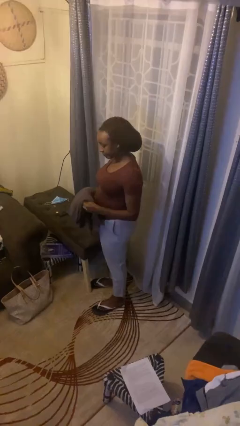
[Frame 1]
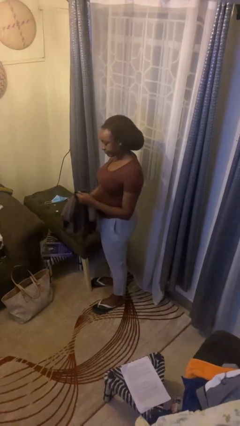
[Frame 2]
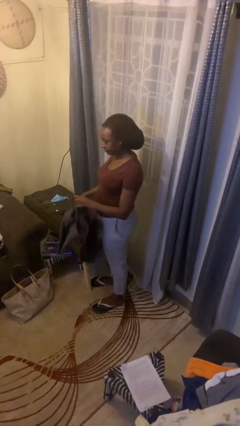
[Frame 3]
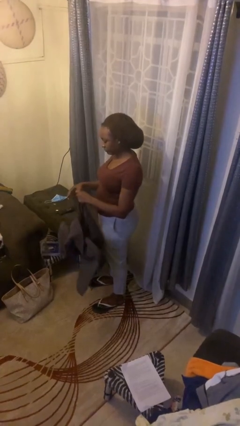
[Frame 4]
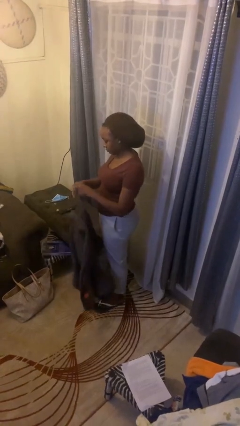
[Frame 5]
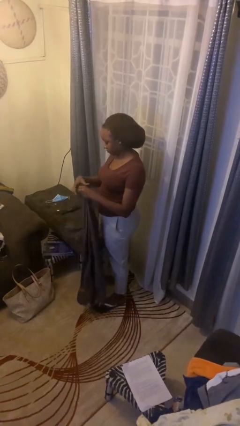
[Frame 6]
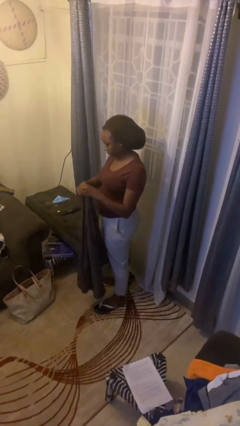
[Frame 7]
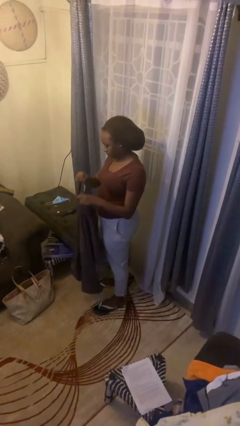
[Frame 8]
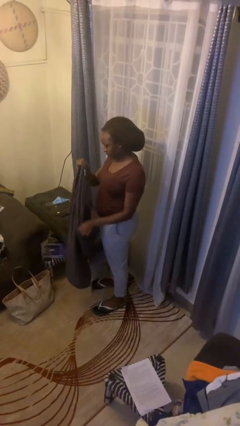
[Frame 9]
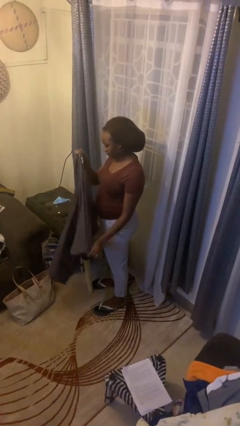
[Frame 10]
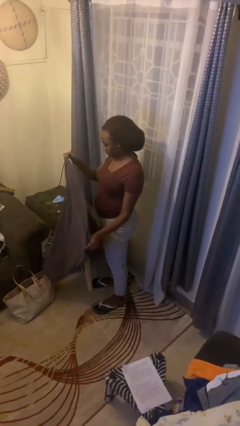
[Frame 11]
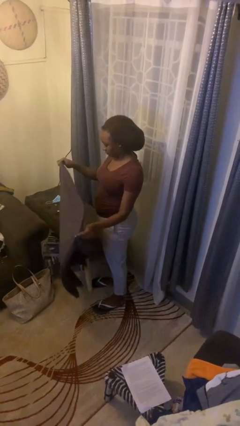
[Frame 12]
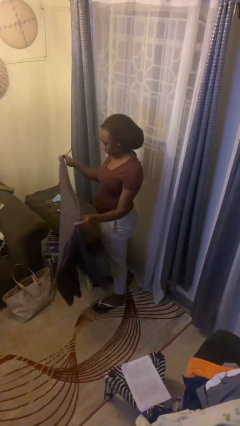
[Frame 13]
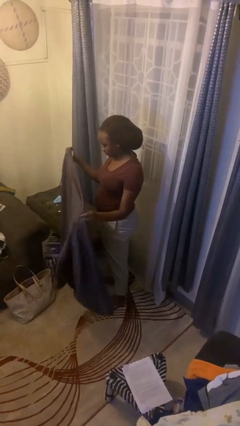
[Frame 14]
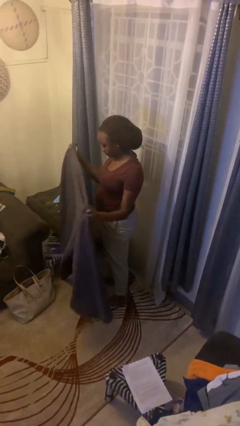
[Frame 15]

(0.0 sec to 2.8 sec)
person unfolds blanket

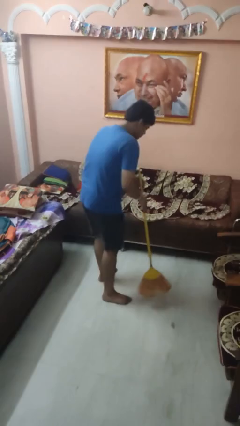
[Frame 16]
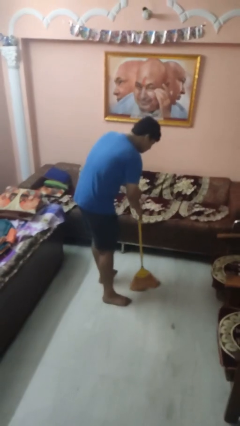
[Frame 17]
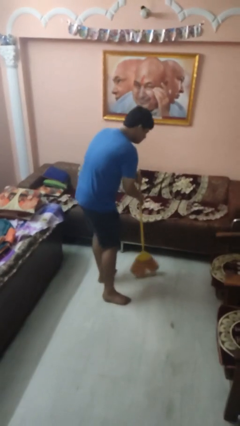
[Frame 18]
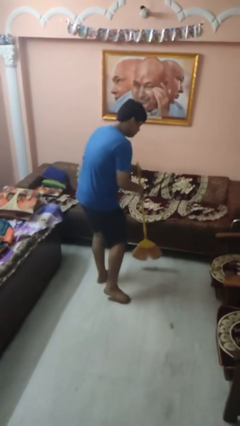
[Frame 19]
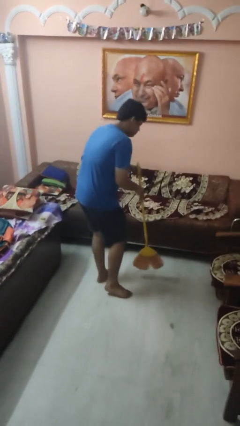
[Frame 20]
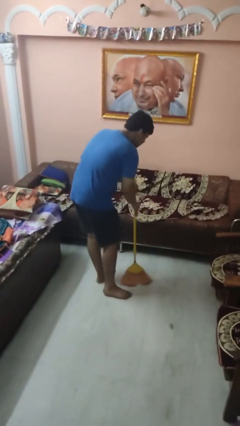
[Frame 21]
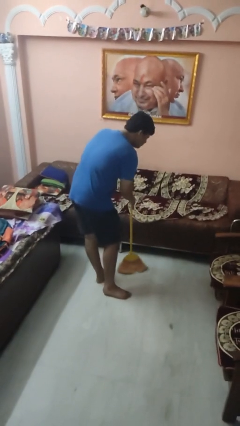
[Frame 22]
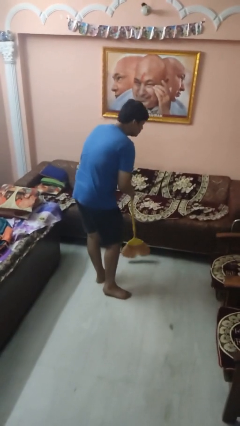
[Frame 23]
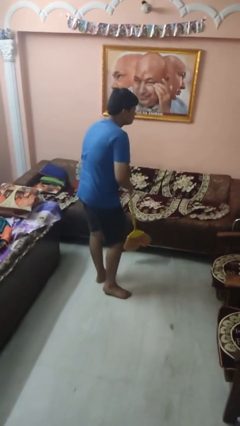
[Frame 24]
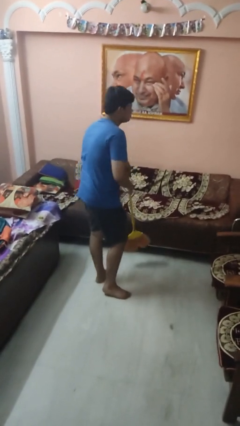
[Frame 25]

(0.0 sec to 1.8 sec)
person sweeps floor

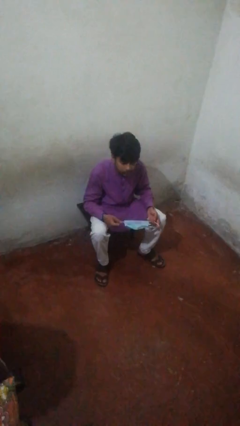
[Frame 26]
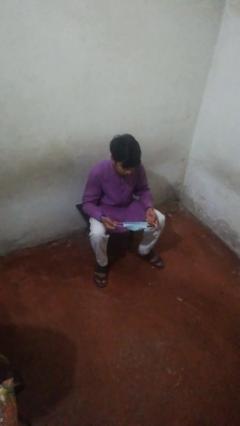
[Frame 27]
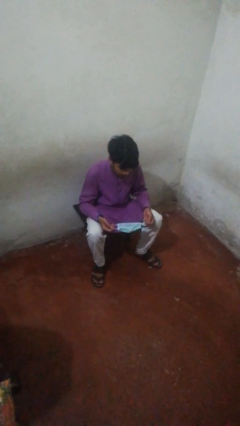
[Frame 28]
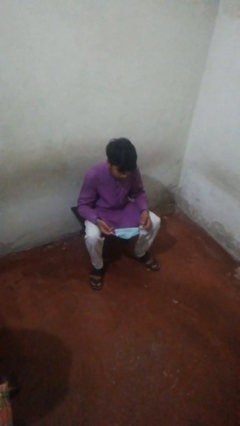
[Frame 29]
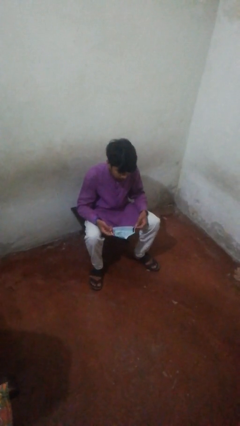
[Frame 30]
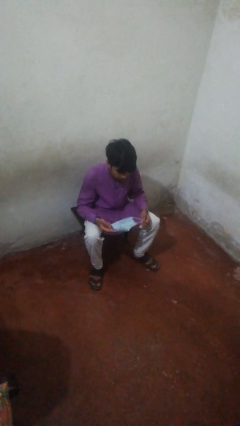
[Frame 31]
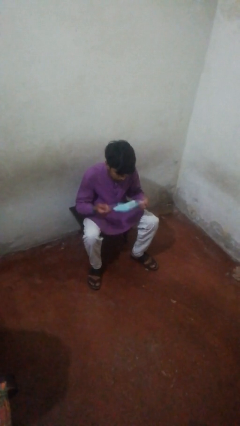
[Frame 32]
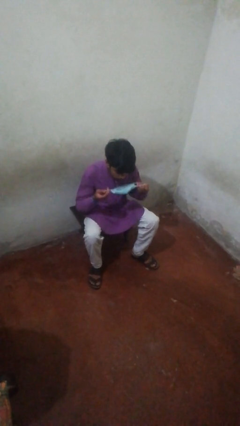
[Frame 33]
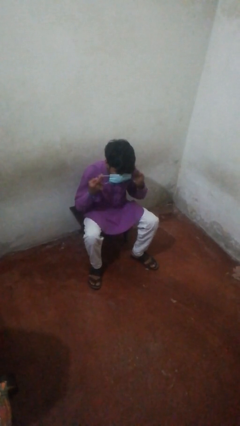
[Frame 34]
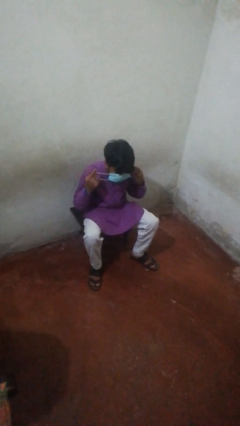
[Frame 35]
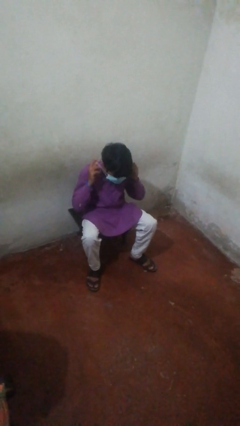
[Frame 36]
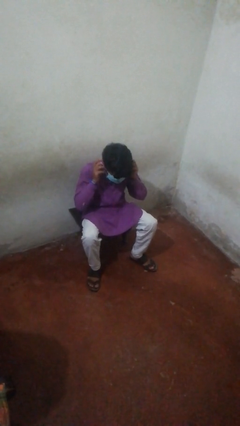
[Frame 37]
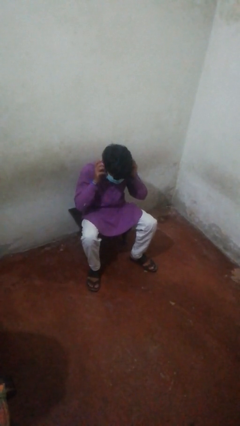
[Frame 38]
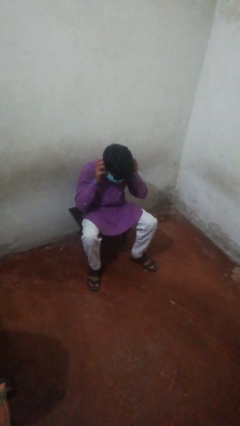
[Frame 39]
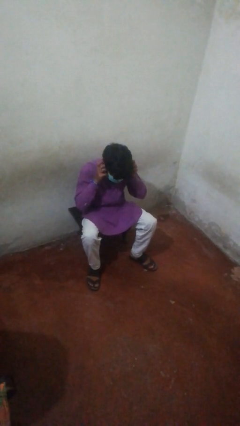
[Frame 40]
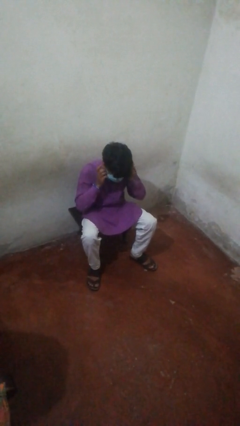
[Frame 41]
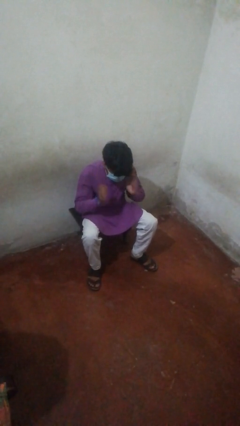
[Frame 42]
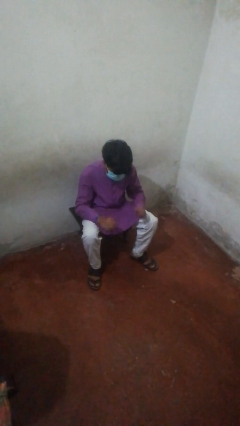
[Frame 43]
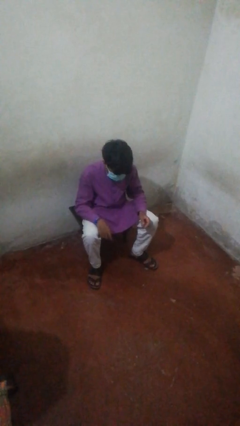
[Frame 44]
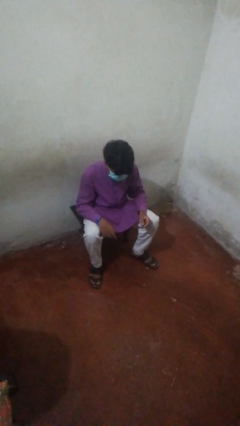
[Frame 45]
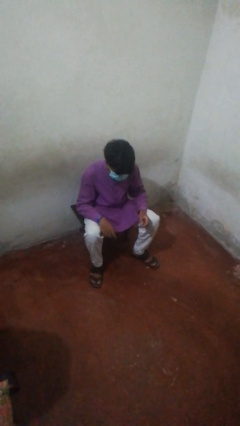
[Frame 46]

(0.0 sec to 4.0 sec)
person puts on facemask

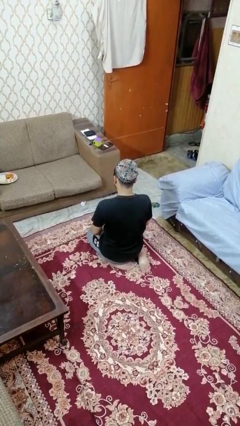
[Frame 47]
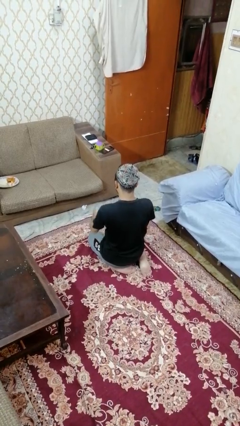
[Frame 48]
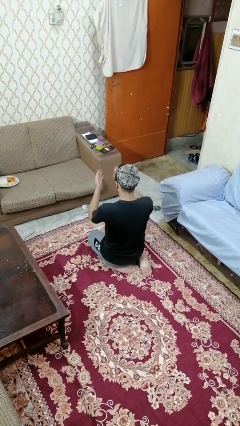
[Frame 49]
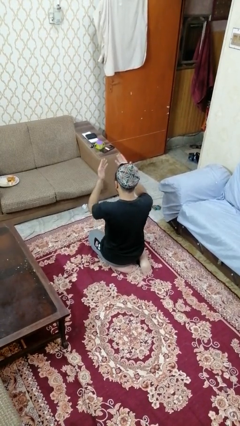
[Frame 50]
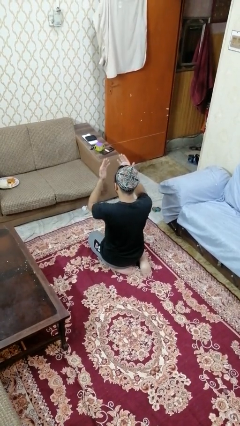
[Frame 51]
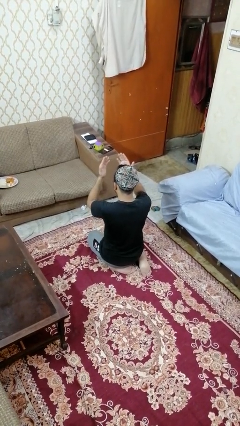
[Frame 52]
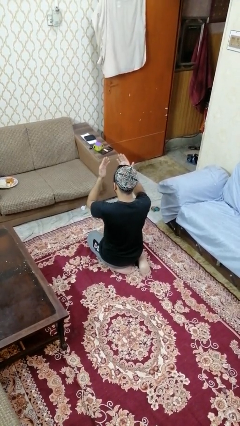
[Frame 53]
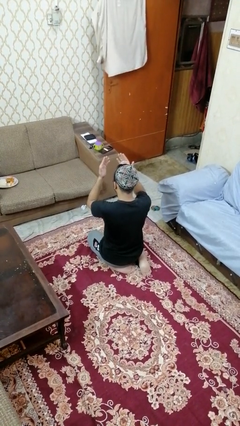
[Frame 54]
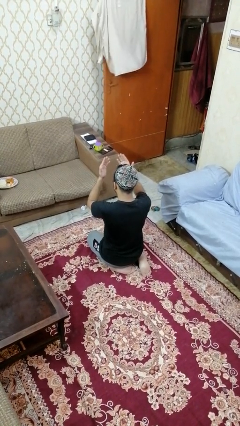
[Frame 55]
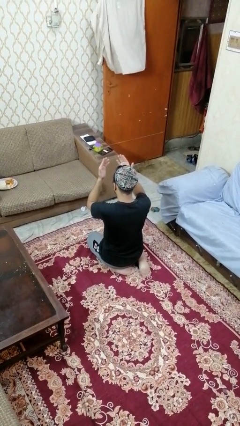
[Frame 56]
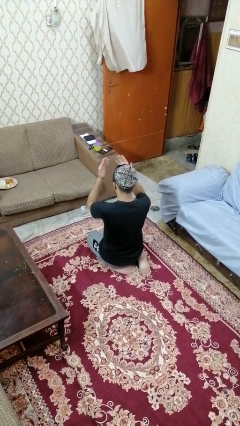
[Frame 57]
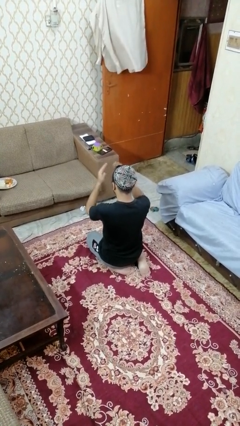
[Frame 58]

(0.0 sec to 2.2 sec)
person prays

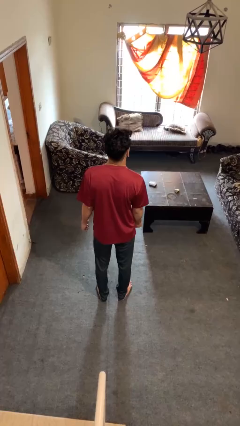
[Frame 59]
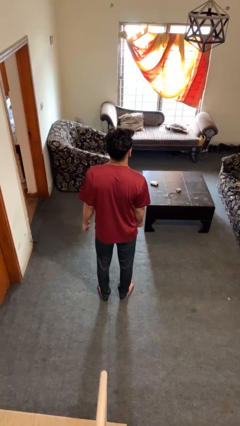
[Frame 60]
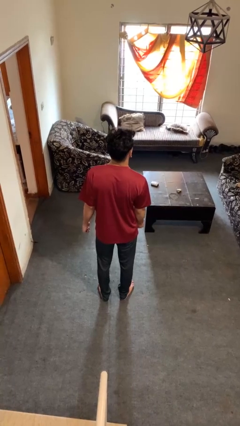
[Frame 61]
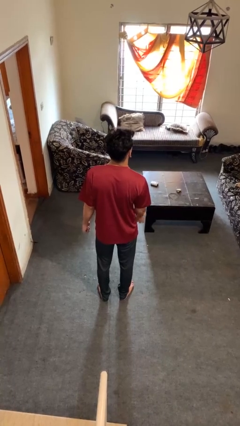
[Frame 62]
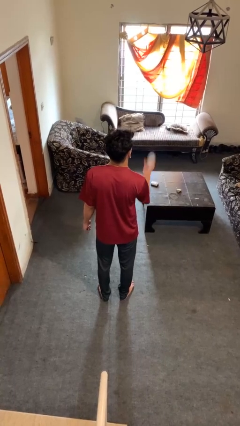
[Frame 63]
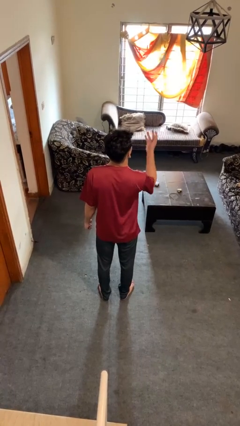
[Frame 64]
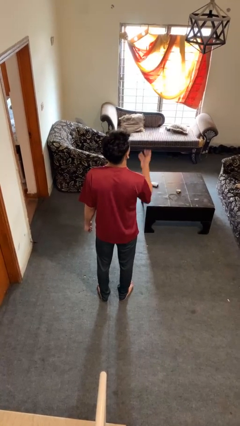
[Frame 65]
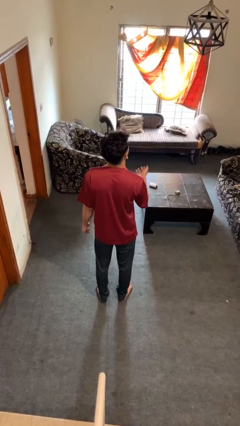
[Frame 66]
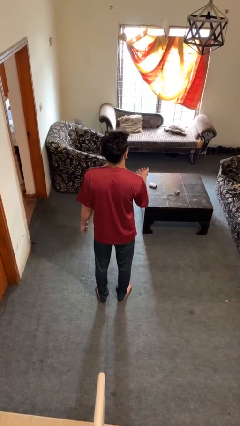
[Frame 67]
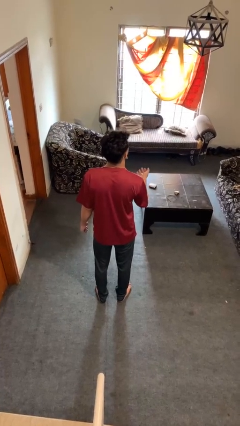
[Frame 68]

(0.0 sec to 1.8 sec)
person drops object

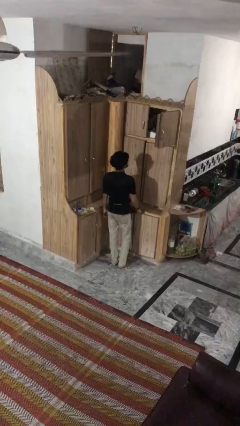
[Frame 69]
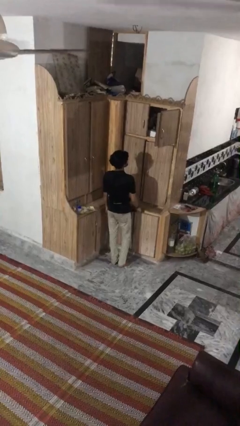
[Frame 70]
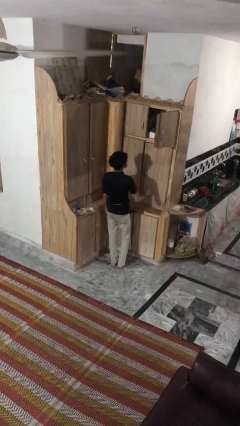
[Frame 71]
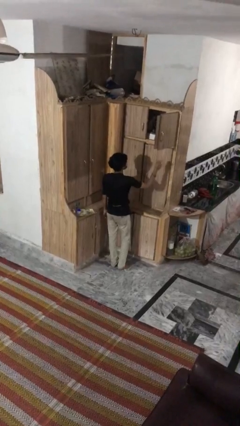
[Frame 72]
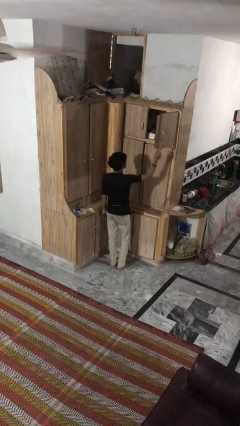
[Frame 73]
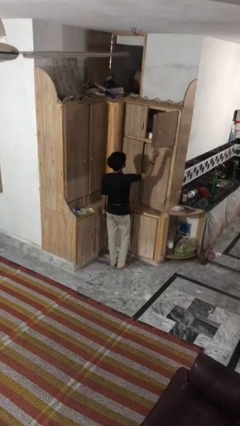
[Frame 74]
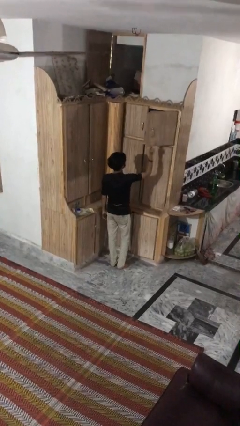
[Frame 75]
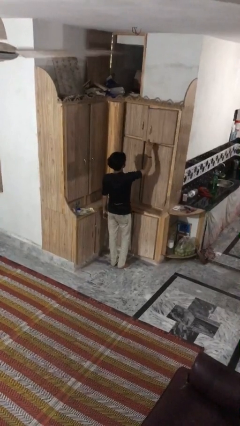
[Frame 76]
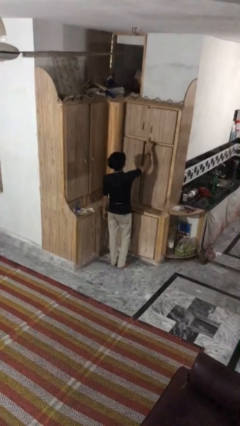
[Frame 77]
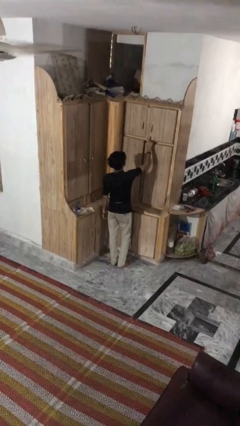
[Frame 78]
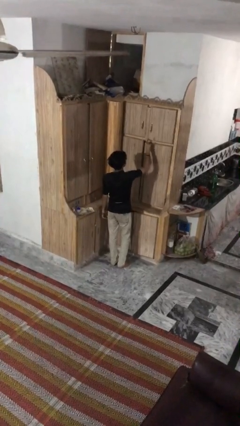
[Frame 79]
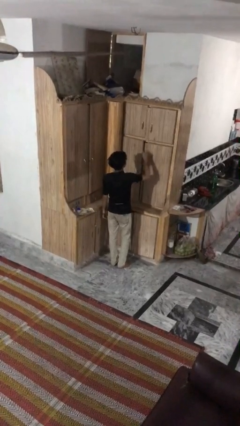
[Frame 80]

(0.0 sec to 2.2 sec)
person closes cabinet

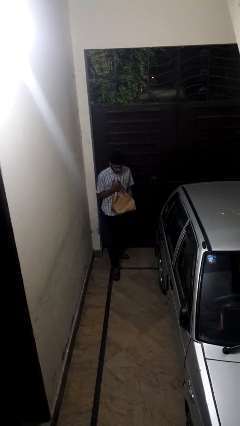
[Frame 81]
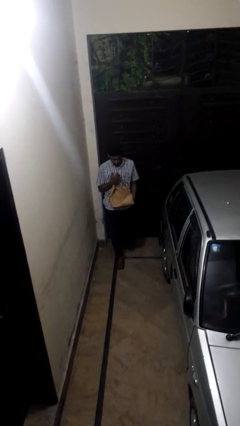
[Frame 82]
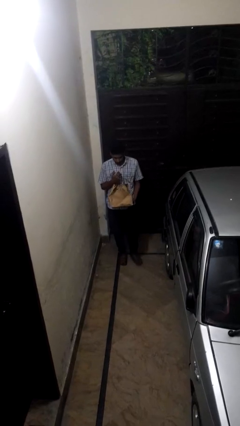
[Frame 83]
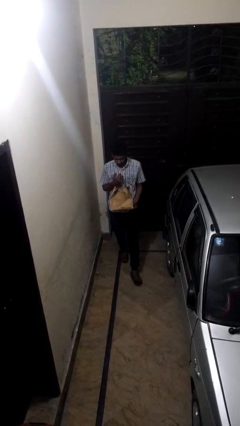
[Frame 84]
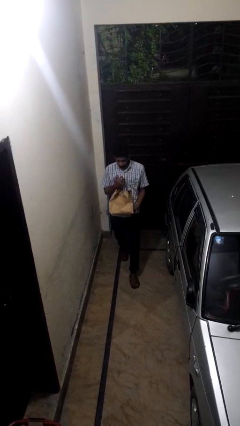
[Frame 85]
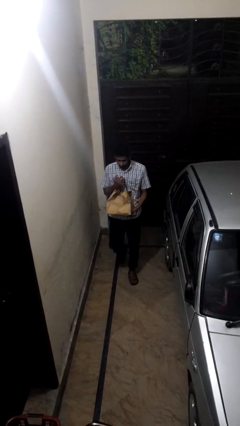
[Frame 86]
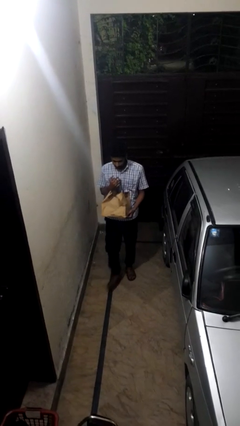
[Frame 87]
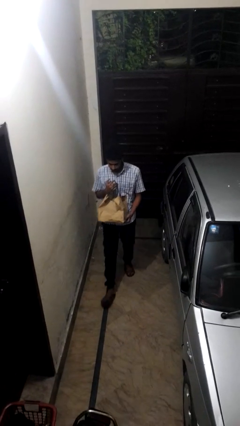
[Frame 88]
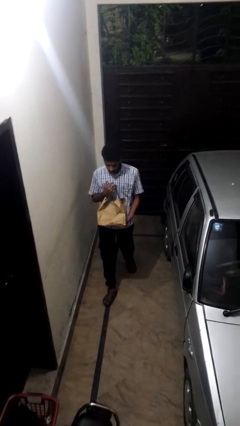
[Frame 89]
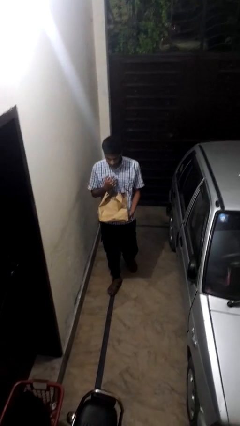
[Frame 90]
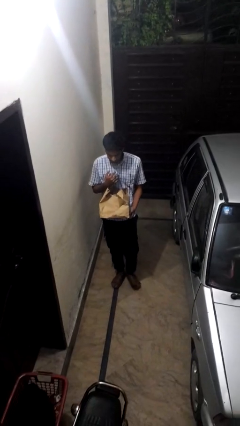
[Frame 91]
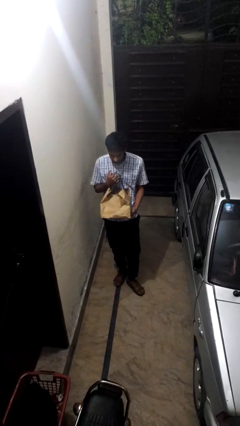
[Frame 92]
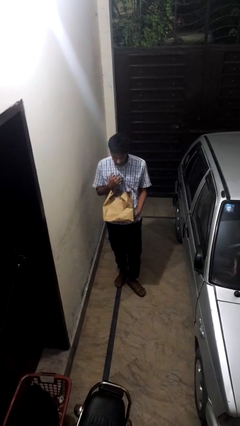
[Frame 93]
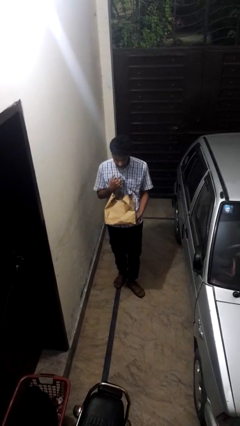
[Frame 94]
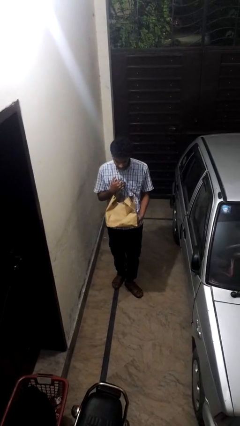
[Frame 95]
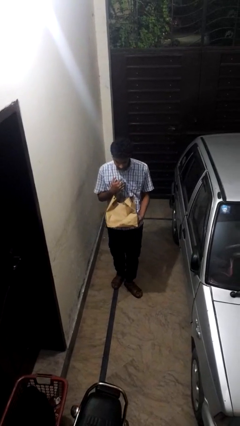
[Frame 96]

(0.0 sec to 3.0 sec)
person carries groceries
